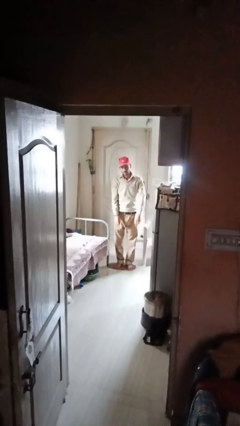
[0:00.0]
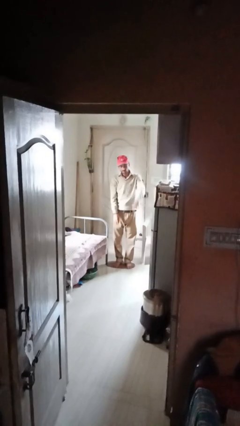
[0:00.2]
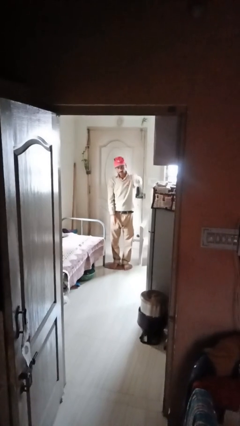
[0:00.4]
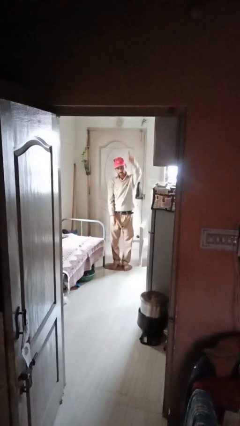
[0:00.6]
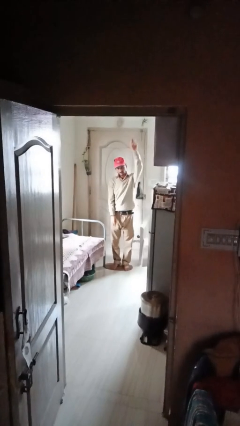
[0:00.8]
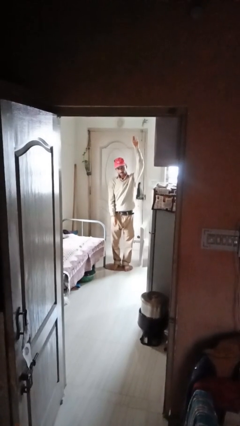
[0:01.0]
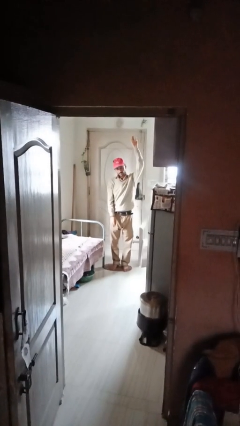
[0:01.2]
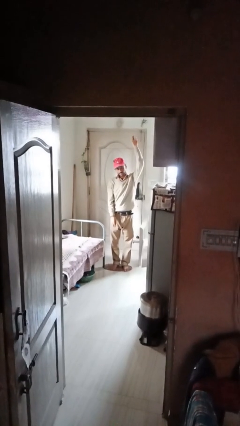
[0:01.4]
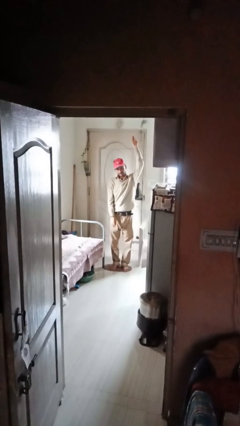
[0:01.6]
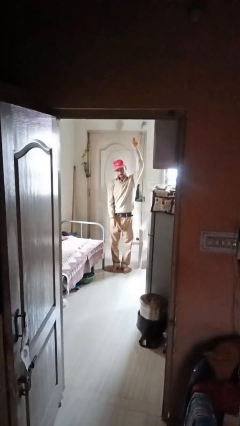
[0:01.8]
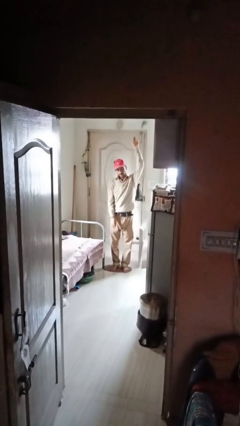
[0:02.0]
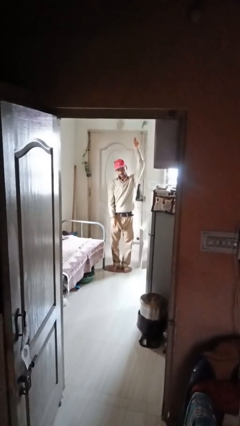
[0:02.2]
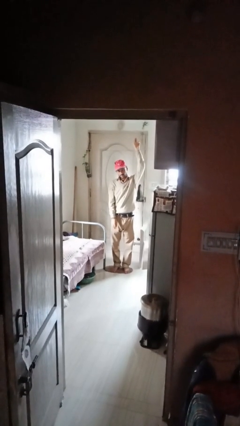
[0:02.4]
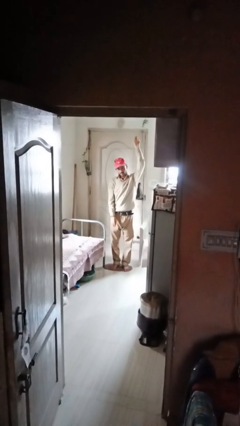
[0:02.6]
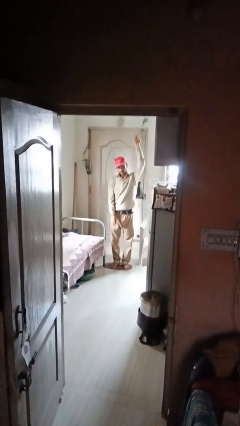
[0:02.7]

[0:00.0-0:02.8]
person gestures swipe up

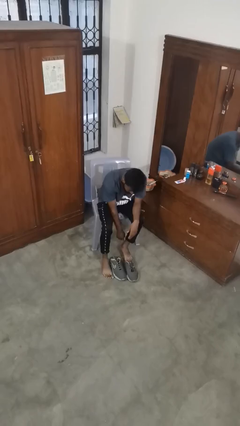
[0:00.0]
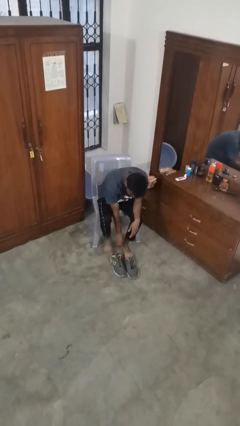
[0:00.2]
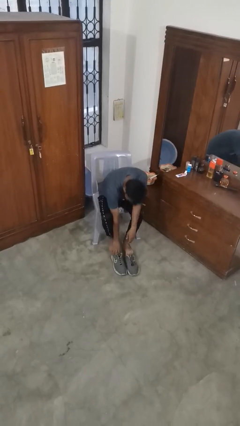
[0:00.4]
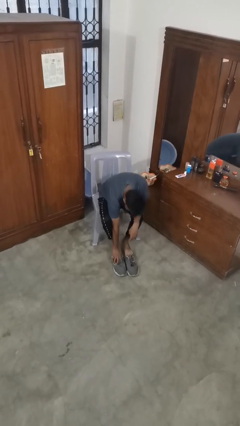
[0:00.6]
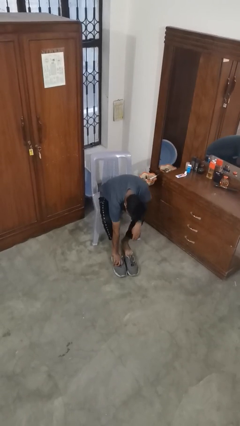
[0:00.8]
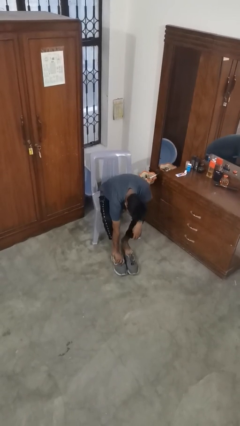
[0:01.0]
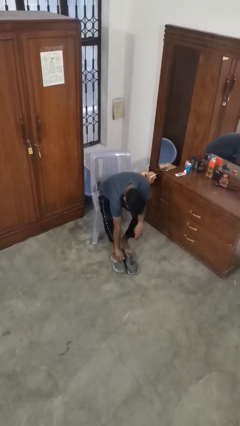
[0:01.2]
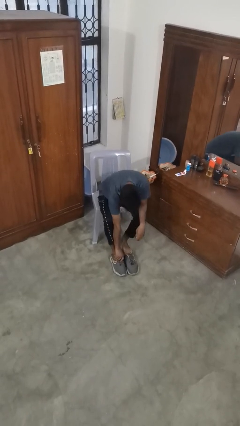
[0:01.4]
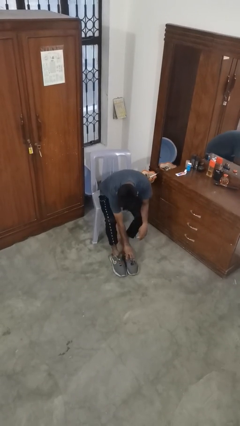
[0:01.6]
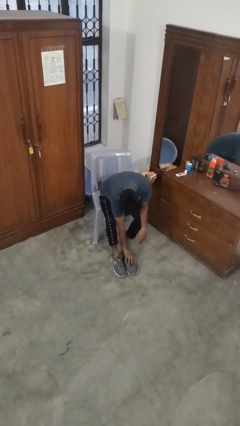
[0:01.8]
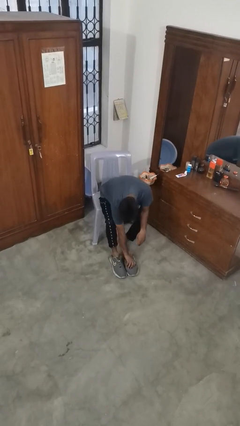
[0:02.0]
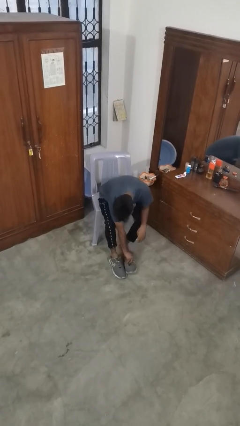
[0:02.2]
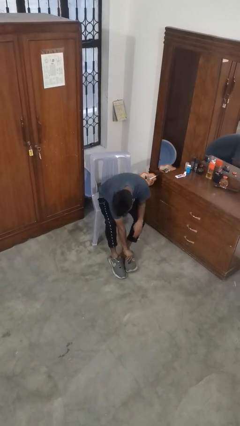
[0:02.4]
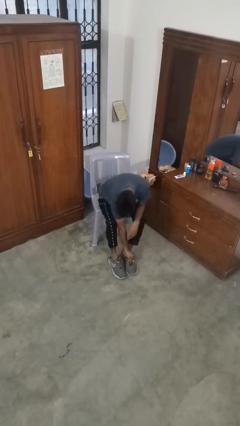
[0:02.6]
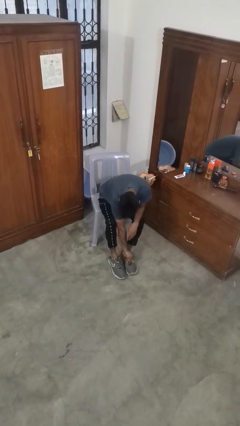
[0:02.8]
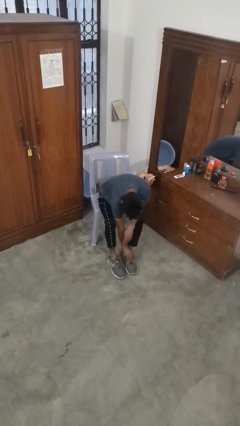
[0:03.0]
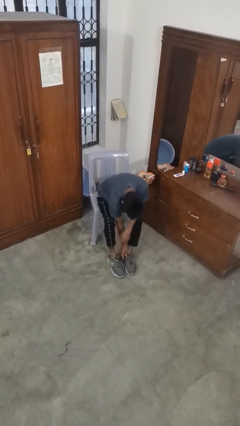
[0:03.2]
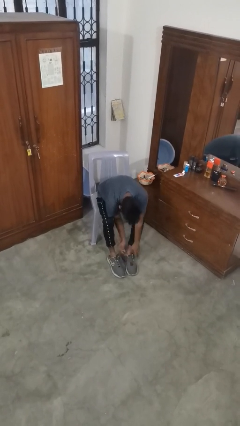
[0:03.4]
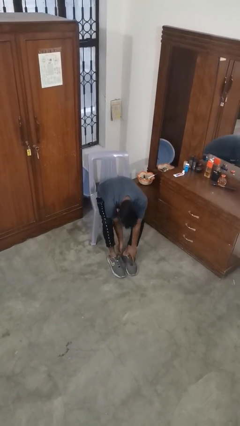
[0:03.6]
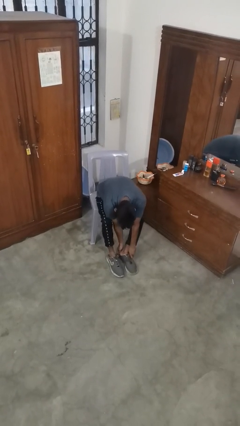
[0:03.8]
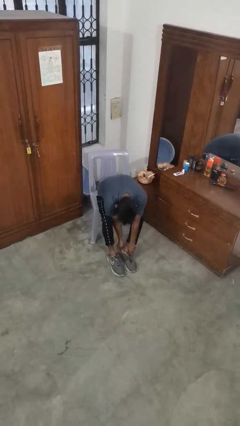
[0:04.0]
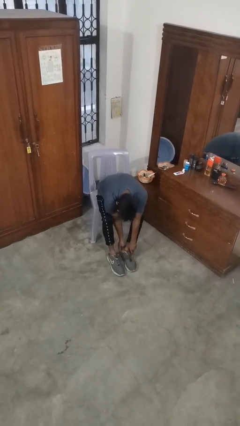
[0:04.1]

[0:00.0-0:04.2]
person puts on shoes

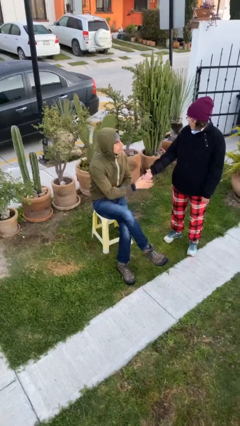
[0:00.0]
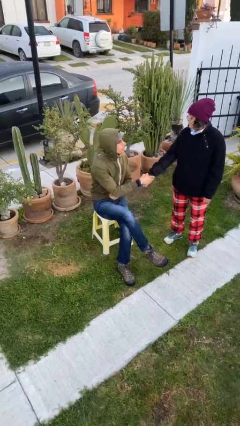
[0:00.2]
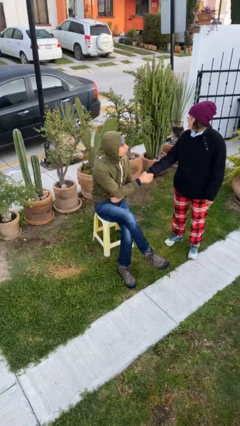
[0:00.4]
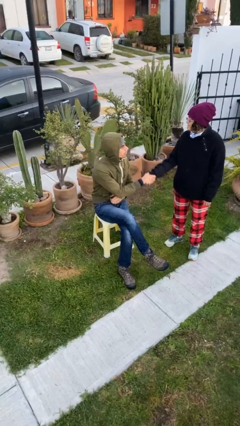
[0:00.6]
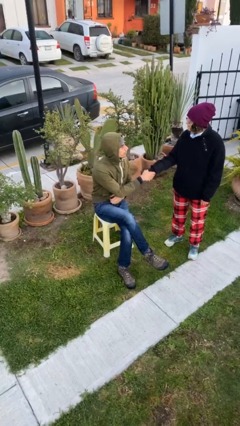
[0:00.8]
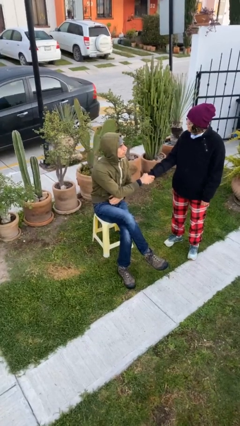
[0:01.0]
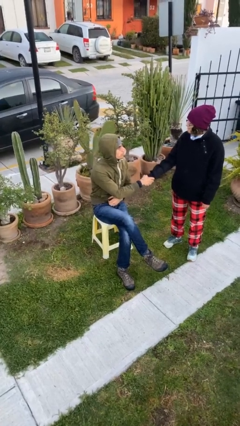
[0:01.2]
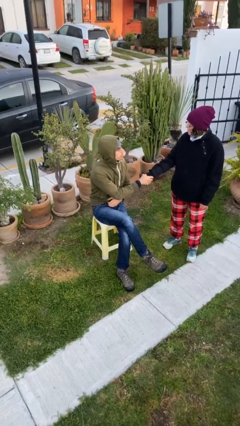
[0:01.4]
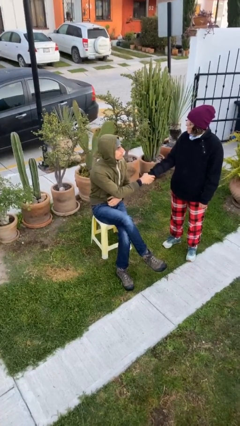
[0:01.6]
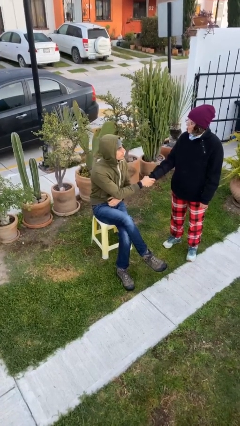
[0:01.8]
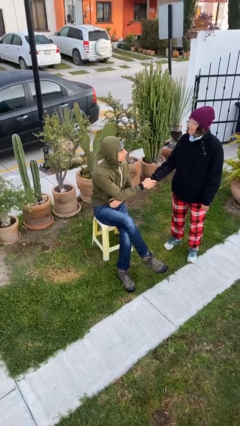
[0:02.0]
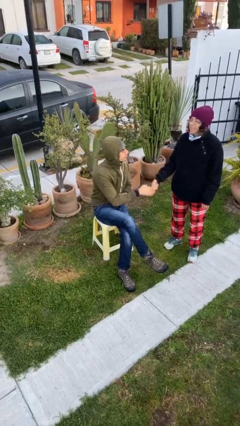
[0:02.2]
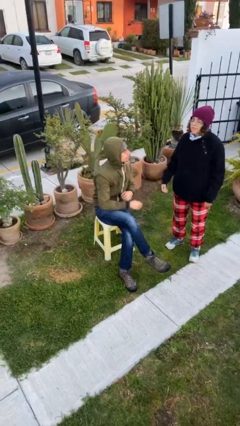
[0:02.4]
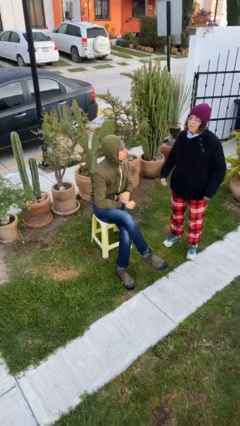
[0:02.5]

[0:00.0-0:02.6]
person shakes hand

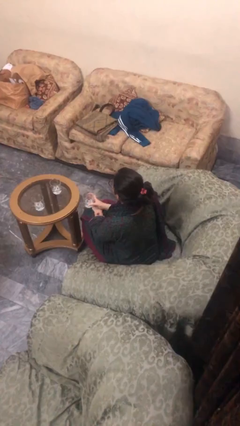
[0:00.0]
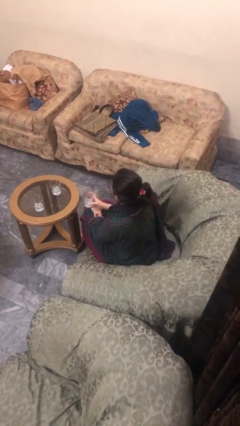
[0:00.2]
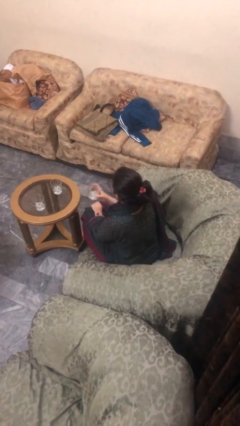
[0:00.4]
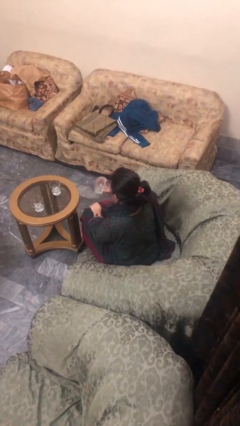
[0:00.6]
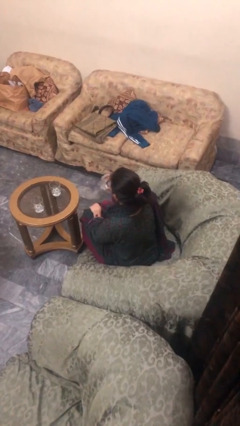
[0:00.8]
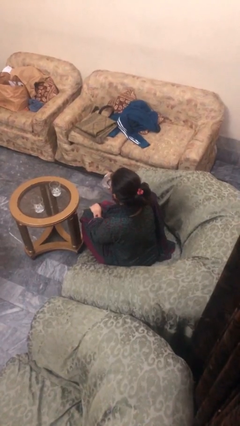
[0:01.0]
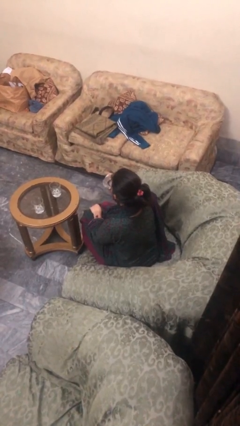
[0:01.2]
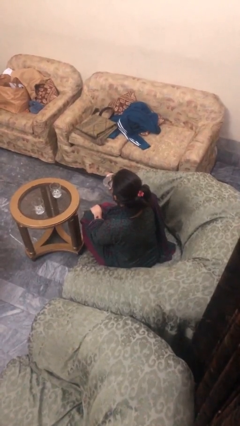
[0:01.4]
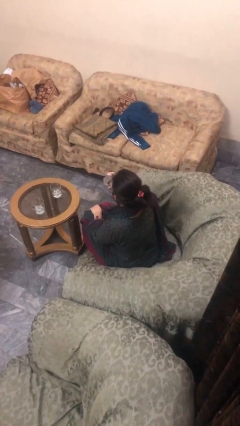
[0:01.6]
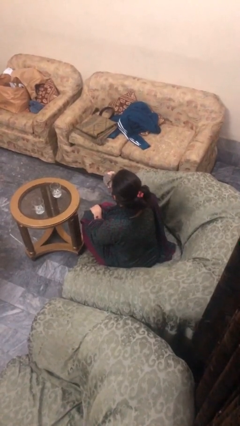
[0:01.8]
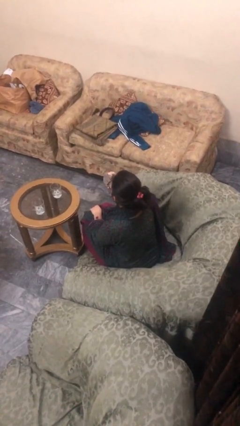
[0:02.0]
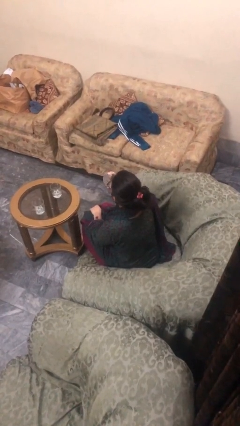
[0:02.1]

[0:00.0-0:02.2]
person drinks from shotglass

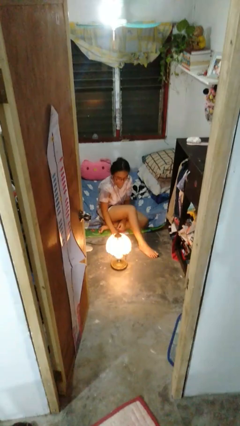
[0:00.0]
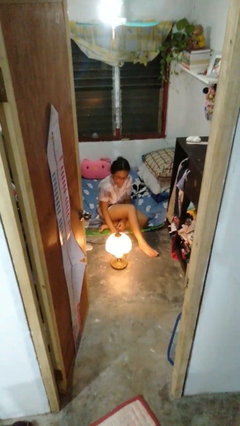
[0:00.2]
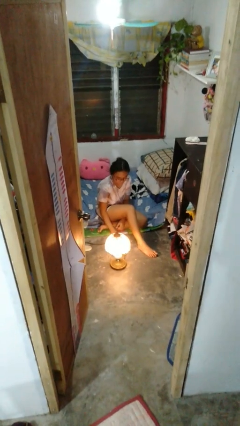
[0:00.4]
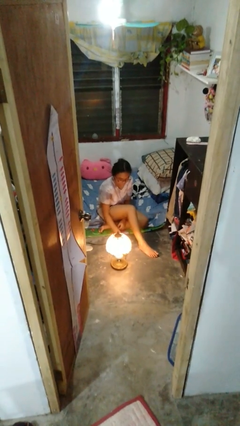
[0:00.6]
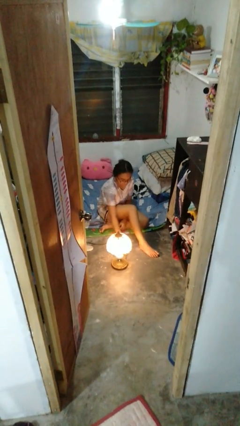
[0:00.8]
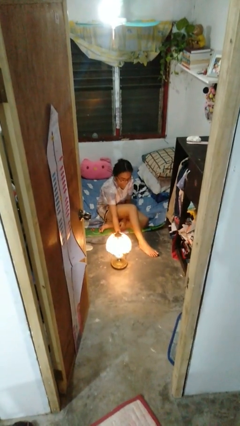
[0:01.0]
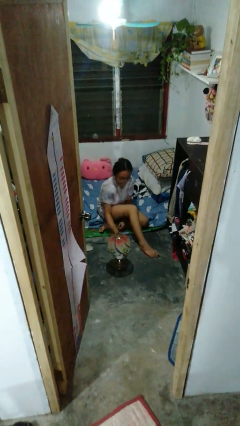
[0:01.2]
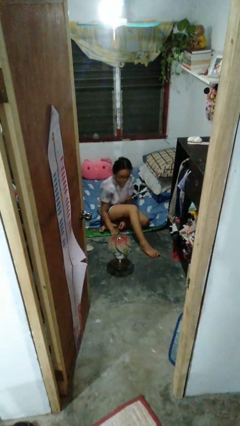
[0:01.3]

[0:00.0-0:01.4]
person turns off lamp

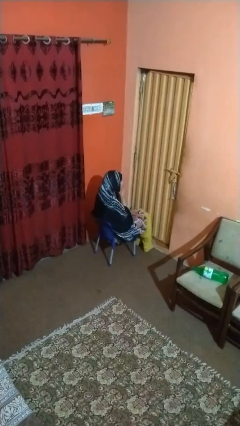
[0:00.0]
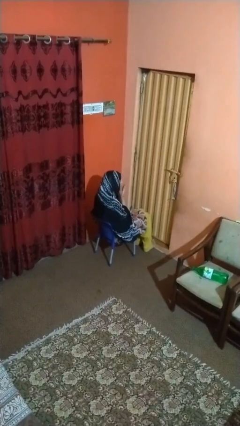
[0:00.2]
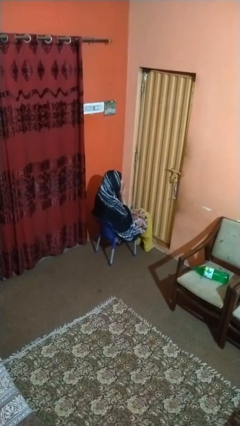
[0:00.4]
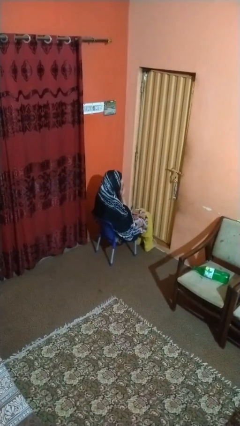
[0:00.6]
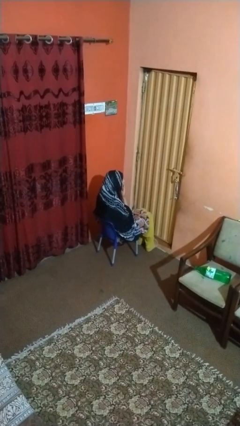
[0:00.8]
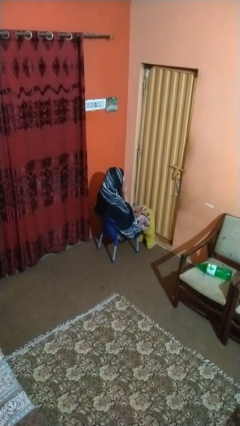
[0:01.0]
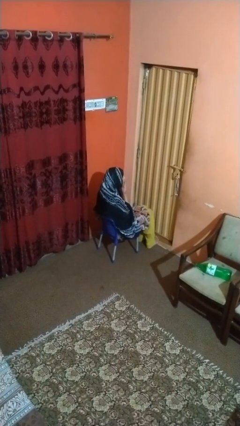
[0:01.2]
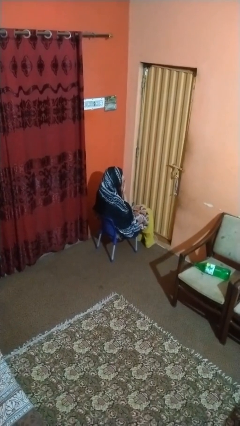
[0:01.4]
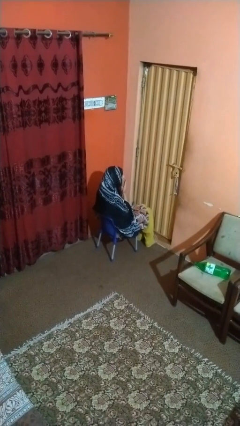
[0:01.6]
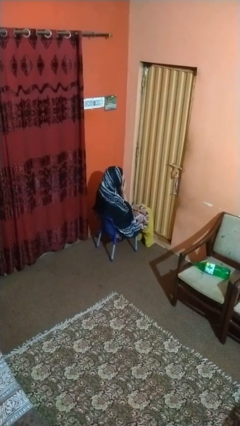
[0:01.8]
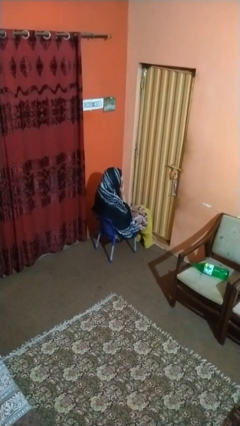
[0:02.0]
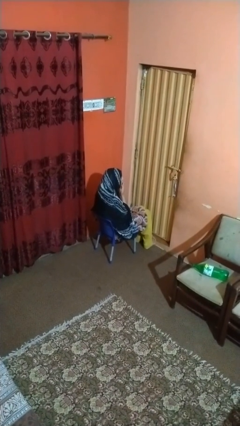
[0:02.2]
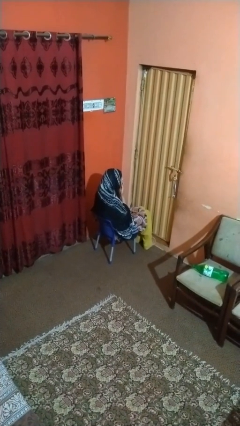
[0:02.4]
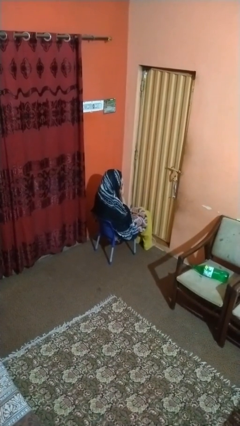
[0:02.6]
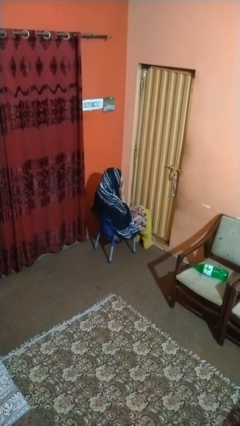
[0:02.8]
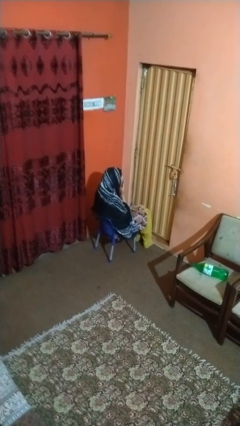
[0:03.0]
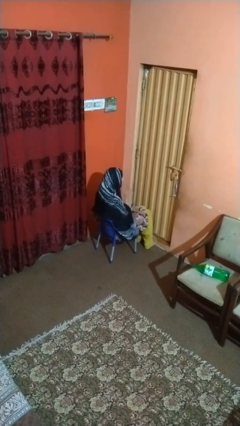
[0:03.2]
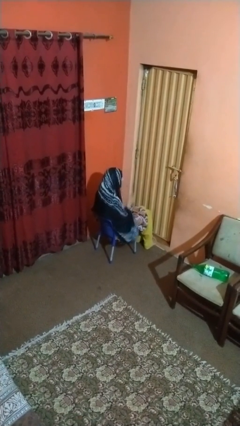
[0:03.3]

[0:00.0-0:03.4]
person yawns

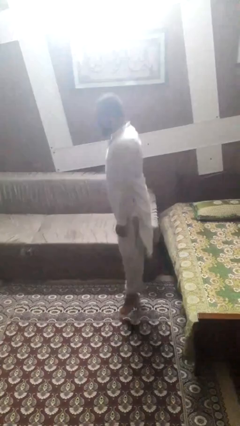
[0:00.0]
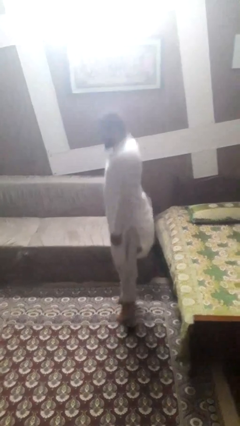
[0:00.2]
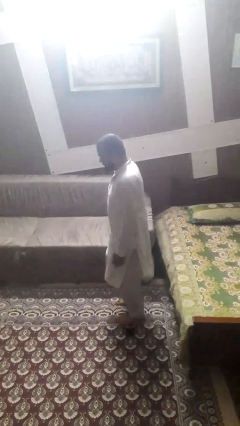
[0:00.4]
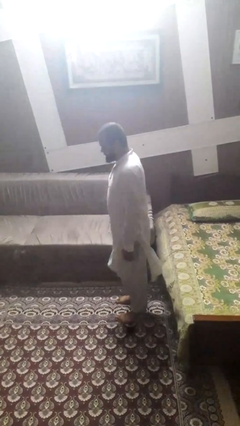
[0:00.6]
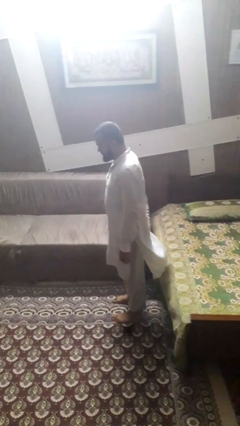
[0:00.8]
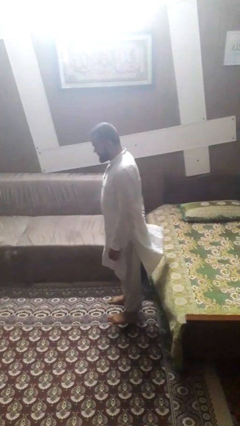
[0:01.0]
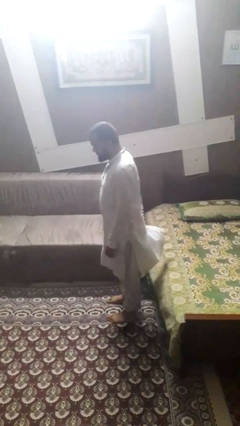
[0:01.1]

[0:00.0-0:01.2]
person jumps
